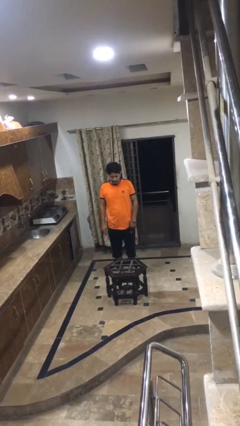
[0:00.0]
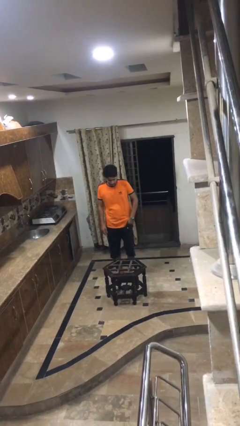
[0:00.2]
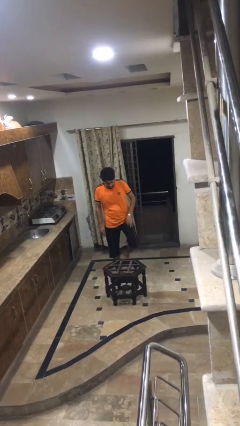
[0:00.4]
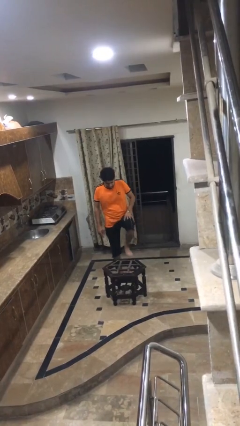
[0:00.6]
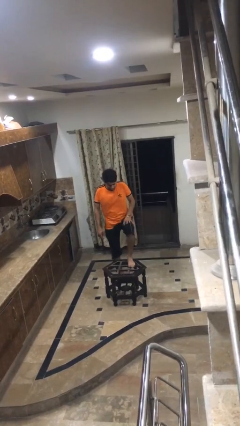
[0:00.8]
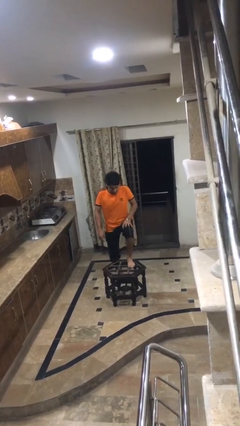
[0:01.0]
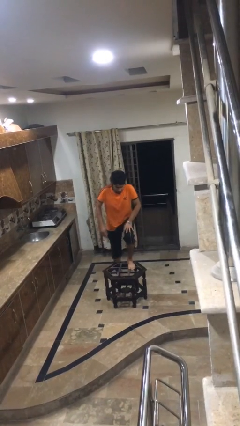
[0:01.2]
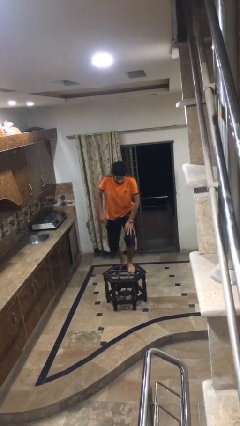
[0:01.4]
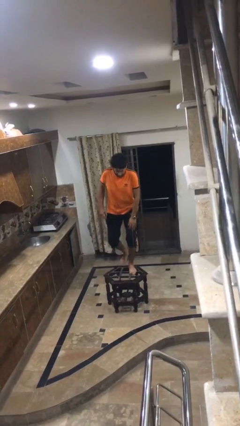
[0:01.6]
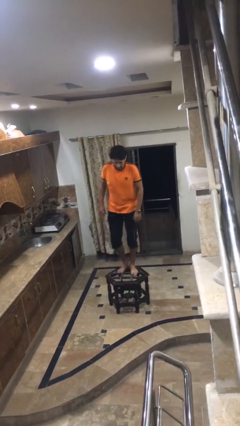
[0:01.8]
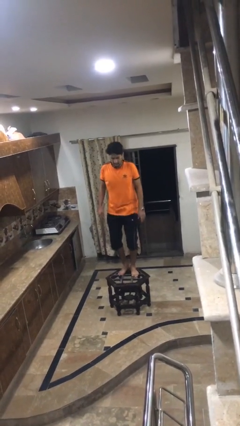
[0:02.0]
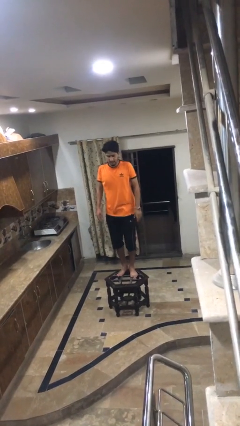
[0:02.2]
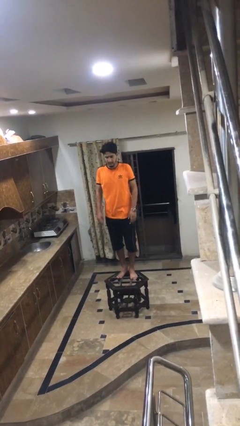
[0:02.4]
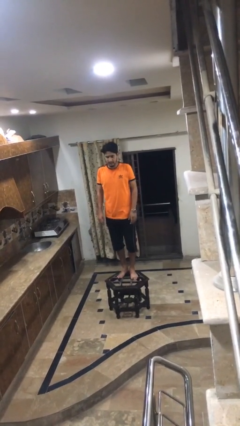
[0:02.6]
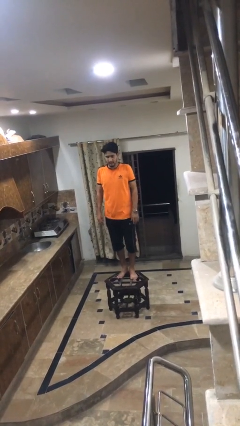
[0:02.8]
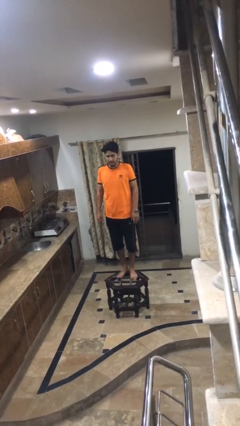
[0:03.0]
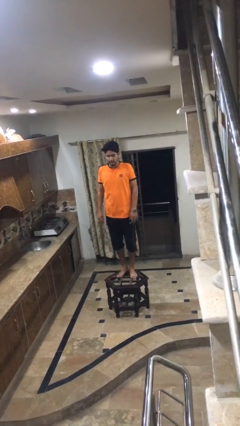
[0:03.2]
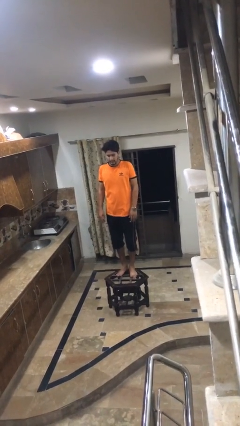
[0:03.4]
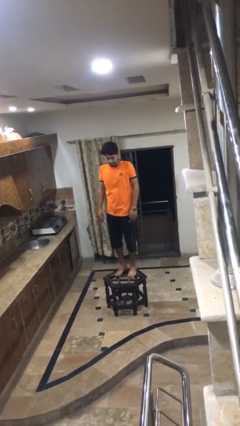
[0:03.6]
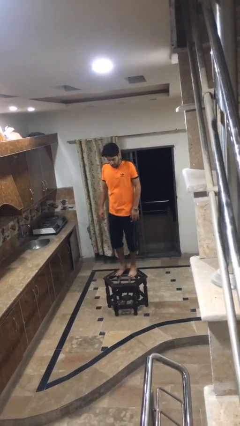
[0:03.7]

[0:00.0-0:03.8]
person climbs on table

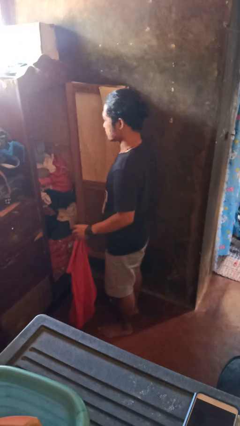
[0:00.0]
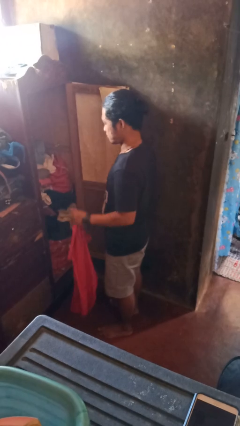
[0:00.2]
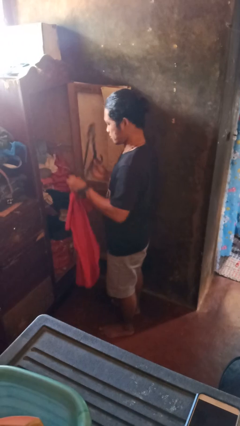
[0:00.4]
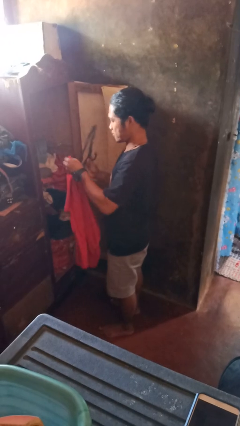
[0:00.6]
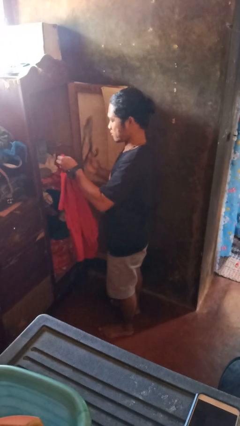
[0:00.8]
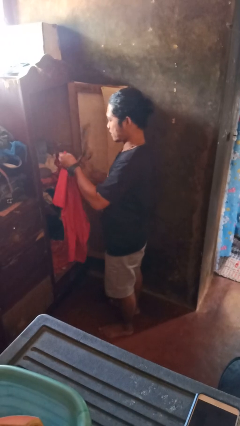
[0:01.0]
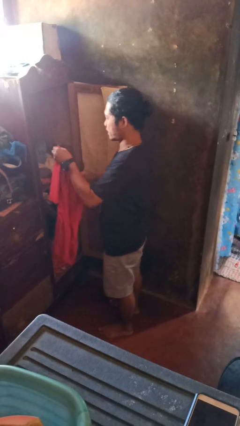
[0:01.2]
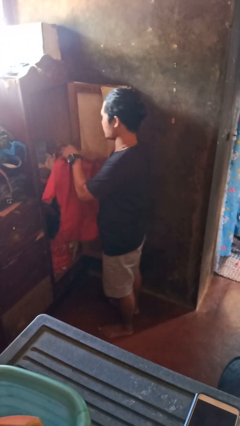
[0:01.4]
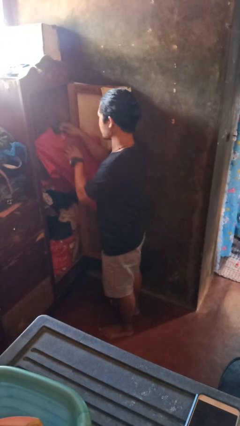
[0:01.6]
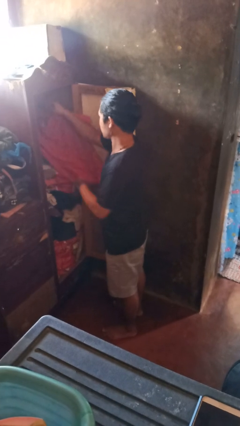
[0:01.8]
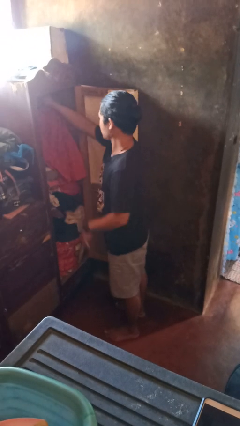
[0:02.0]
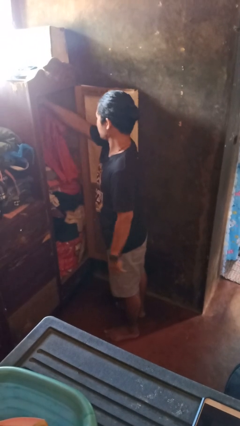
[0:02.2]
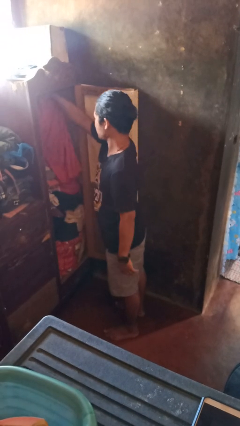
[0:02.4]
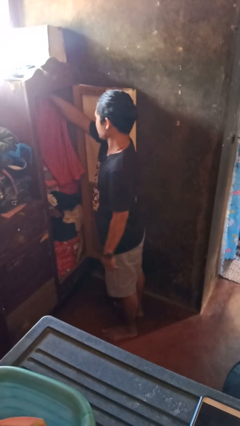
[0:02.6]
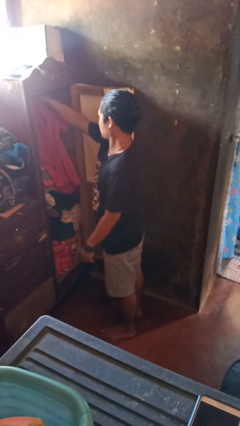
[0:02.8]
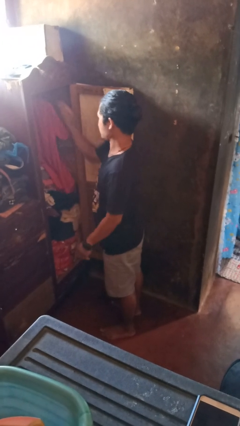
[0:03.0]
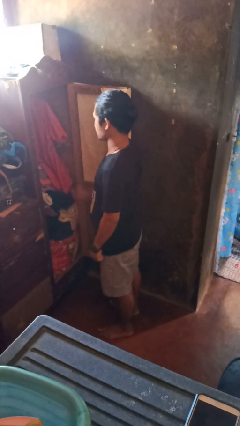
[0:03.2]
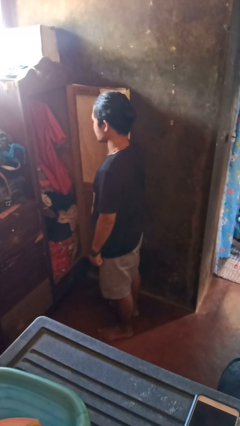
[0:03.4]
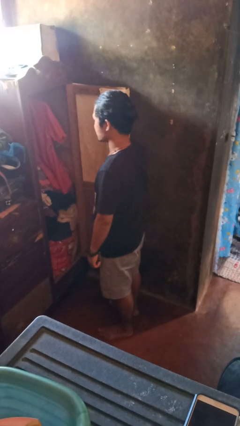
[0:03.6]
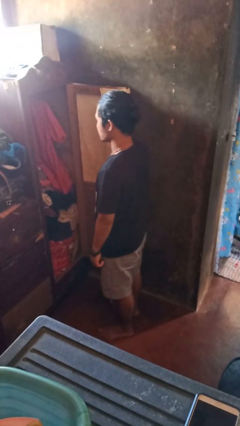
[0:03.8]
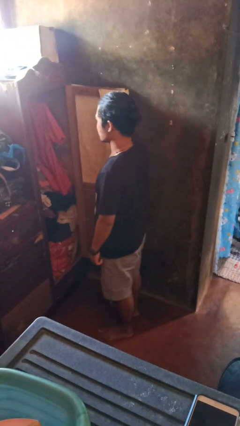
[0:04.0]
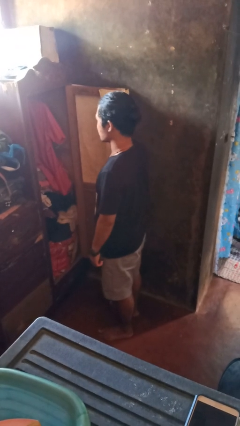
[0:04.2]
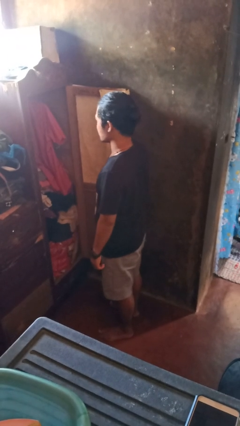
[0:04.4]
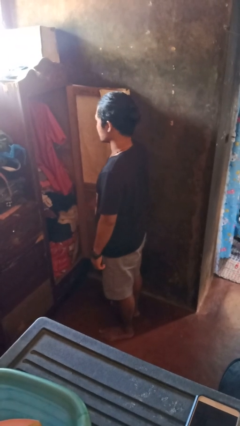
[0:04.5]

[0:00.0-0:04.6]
person puts clothes into closet

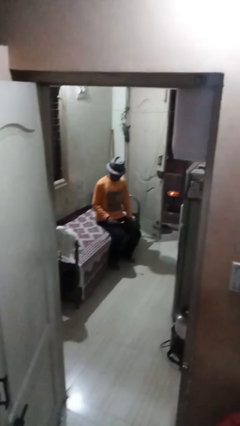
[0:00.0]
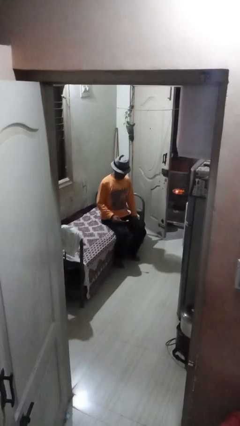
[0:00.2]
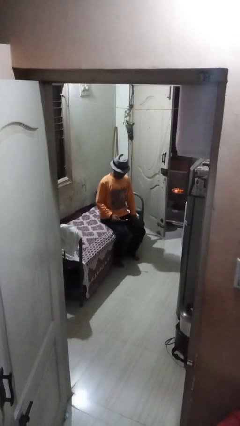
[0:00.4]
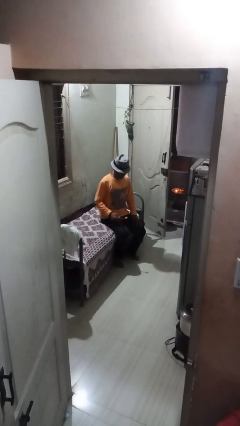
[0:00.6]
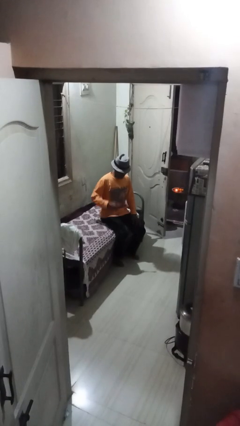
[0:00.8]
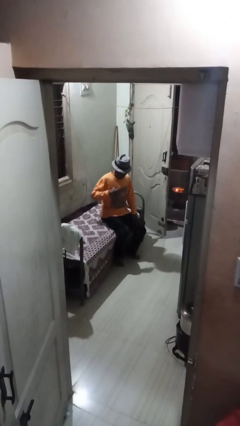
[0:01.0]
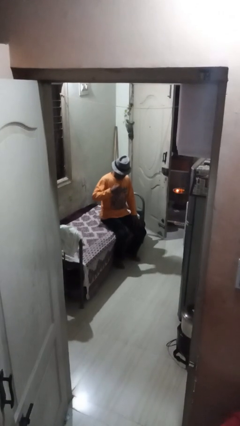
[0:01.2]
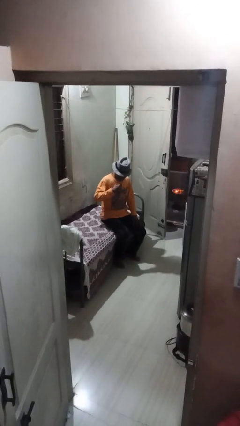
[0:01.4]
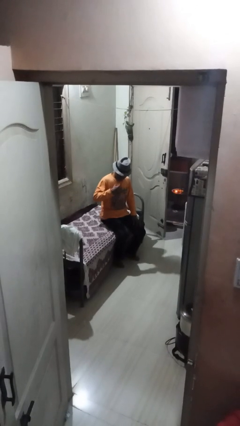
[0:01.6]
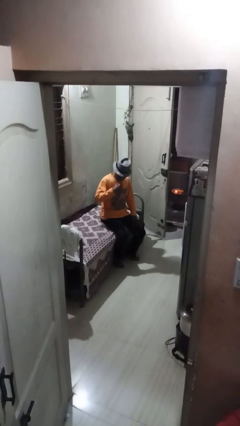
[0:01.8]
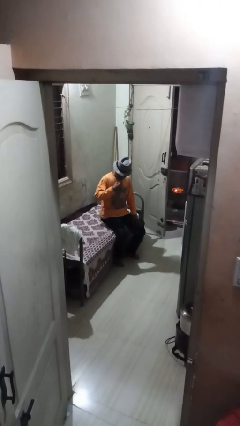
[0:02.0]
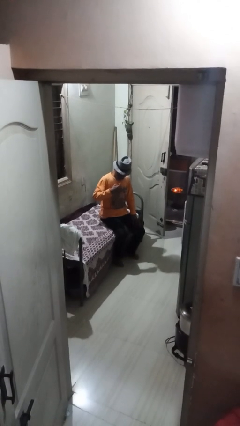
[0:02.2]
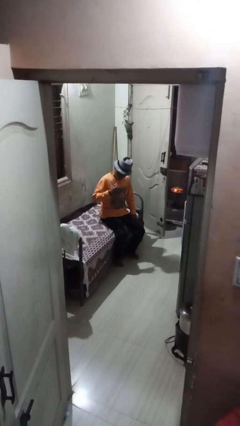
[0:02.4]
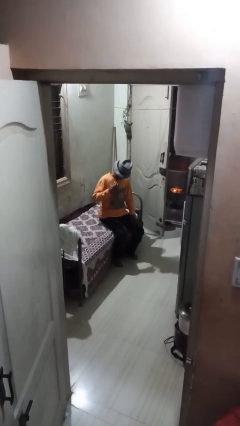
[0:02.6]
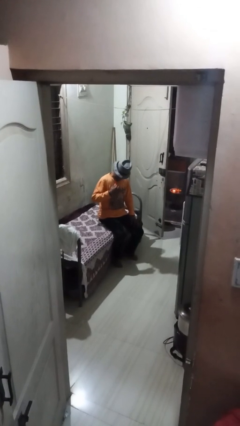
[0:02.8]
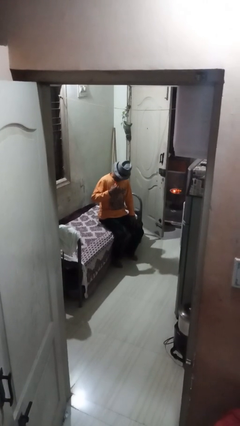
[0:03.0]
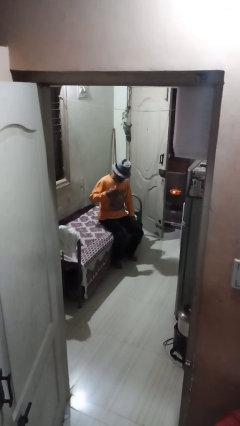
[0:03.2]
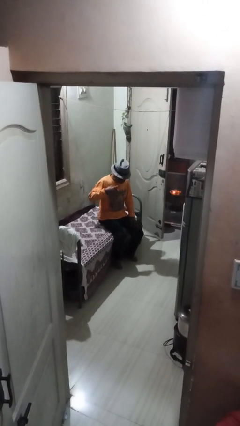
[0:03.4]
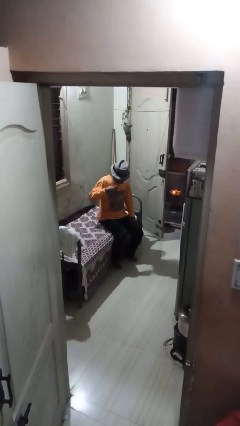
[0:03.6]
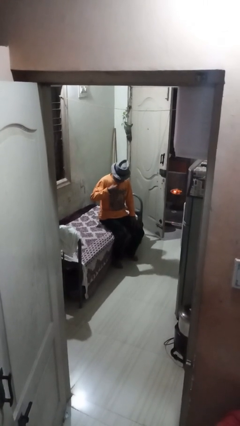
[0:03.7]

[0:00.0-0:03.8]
person brushes teeth

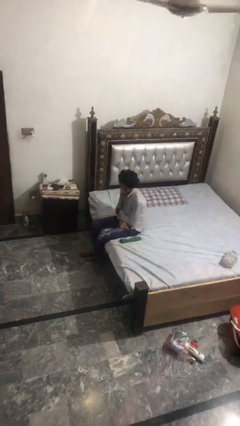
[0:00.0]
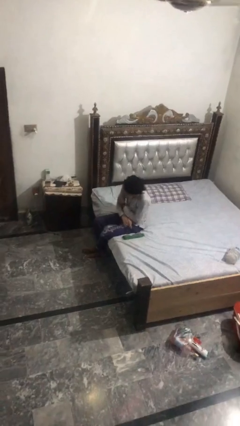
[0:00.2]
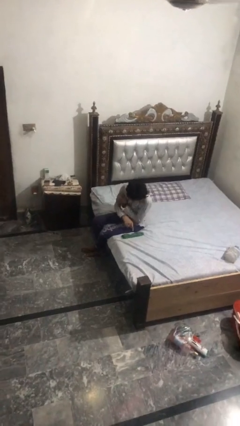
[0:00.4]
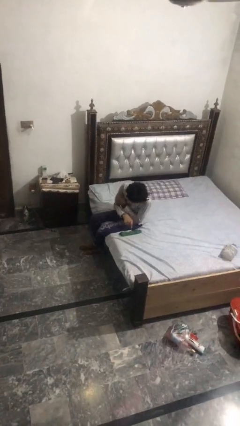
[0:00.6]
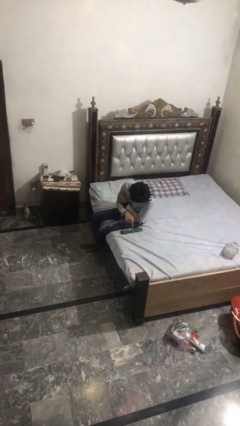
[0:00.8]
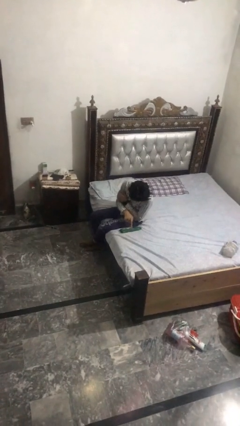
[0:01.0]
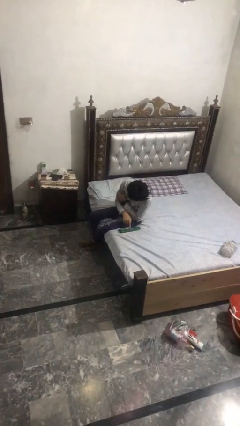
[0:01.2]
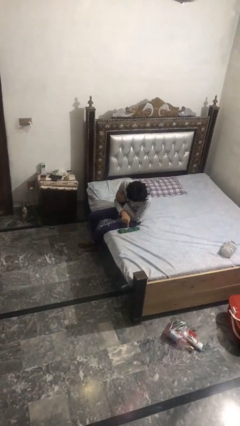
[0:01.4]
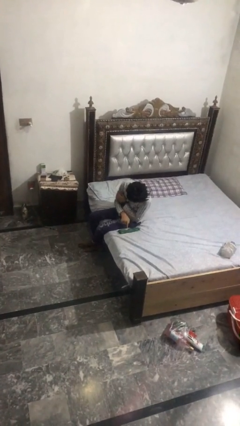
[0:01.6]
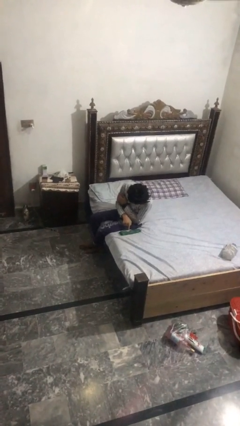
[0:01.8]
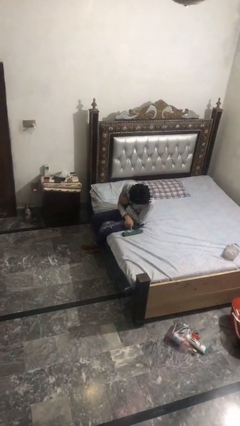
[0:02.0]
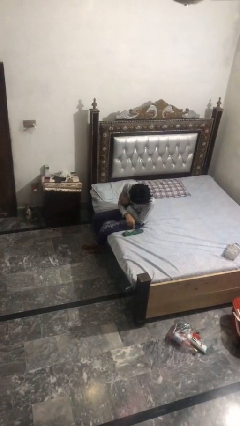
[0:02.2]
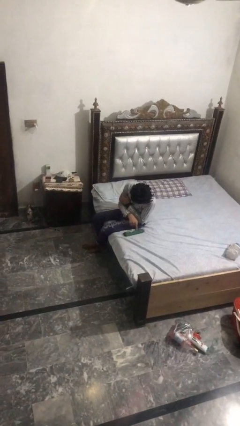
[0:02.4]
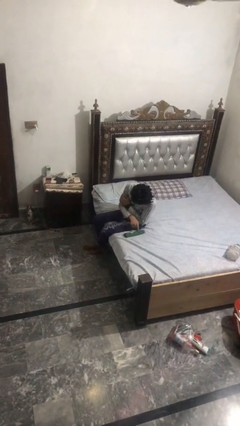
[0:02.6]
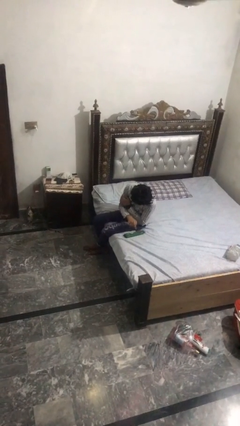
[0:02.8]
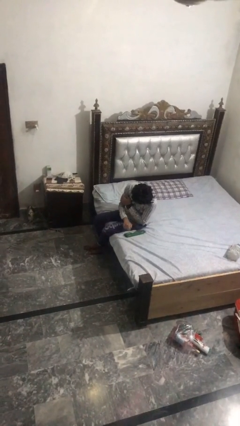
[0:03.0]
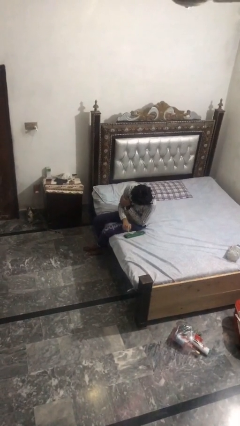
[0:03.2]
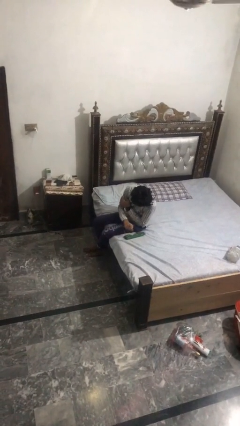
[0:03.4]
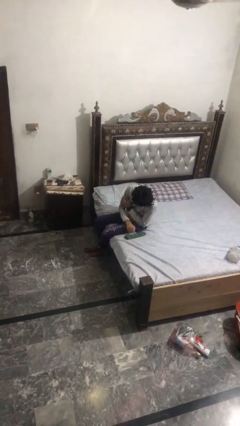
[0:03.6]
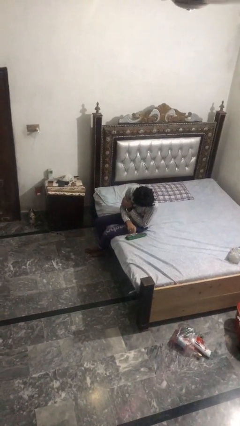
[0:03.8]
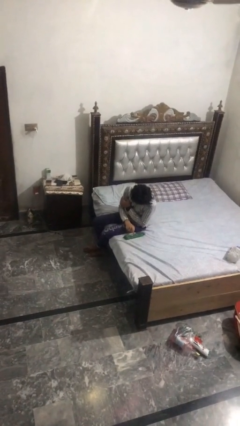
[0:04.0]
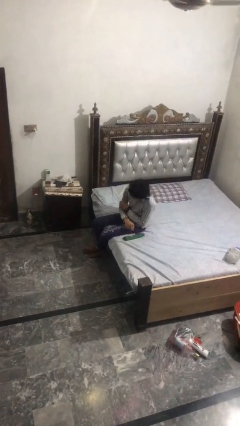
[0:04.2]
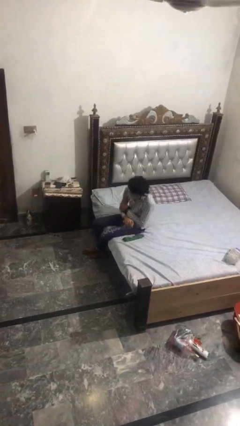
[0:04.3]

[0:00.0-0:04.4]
person taps object with finger

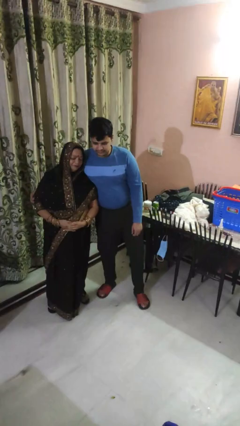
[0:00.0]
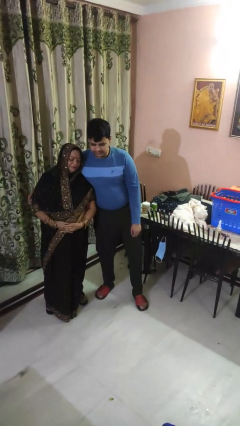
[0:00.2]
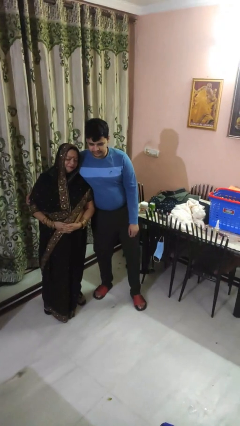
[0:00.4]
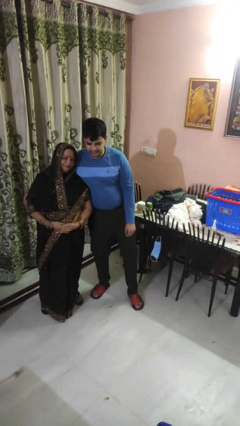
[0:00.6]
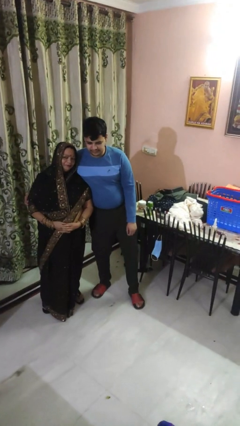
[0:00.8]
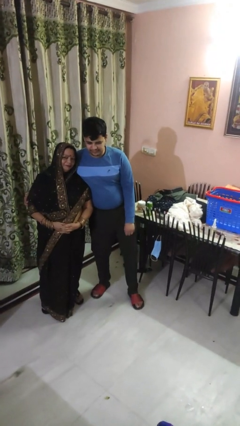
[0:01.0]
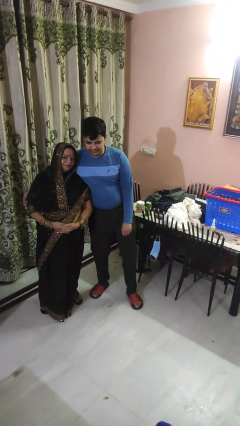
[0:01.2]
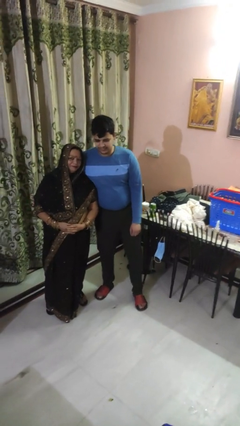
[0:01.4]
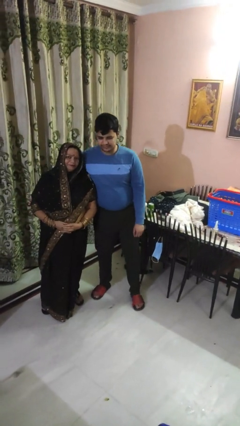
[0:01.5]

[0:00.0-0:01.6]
person hugs person from side
